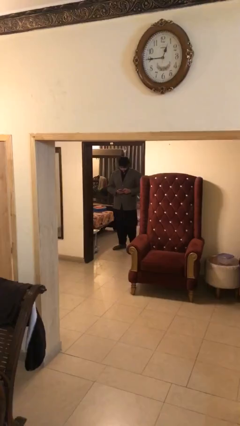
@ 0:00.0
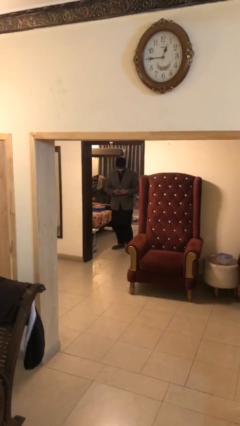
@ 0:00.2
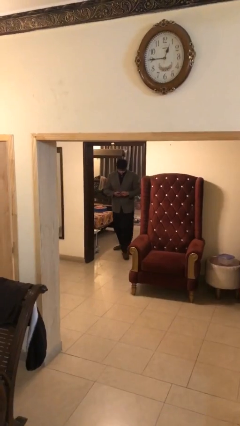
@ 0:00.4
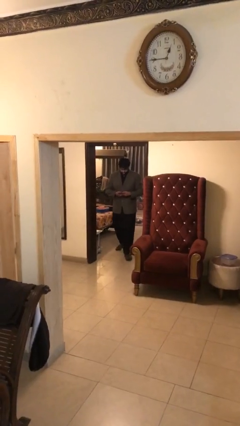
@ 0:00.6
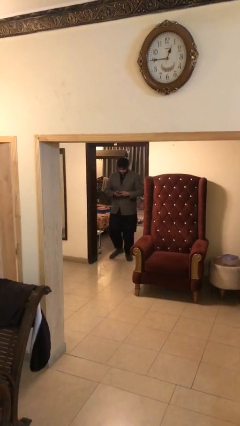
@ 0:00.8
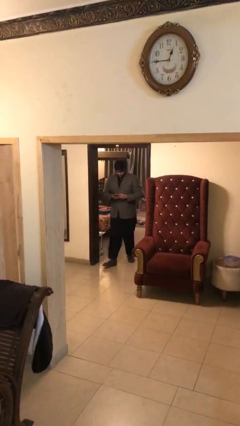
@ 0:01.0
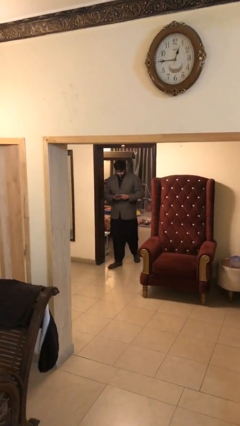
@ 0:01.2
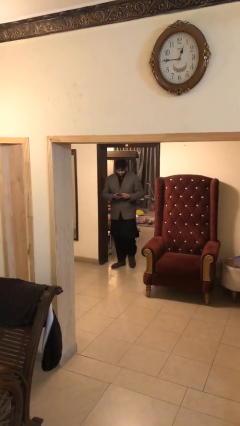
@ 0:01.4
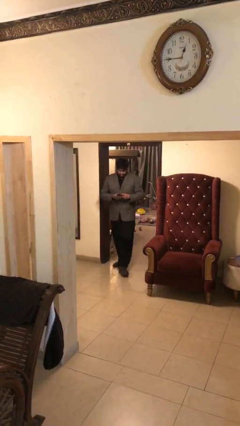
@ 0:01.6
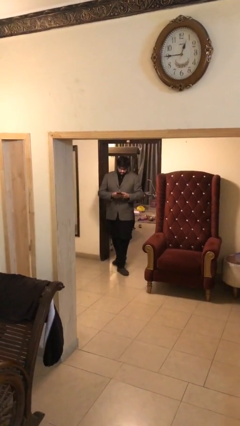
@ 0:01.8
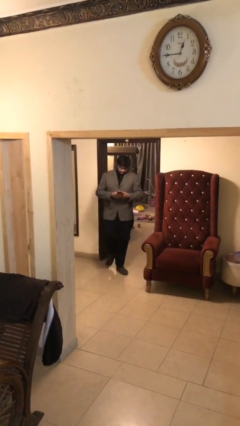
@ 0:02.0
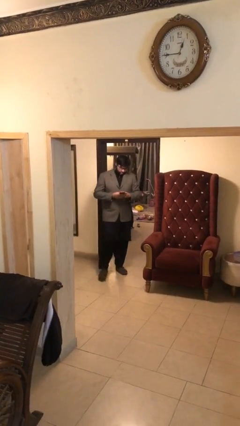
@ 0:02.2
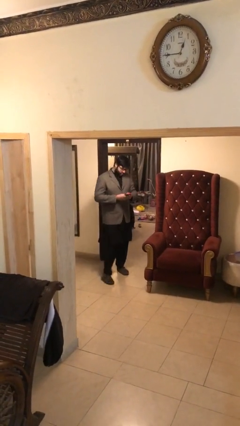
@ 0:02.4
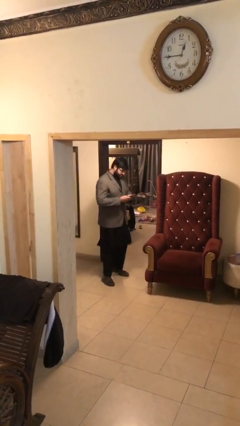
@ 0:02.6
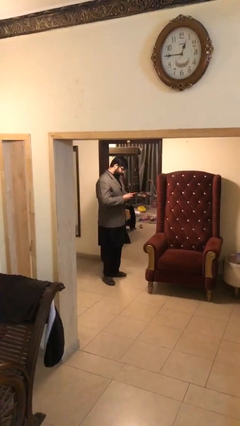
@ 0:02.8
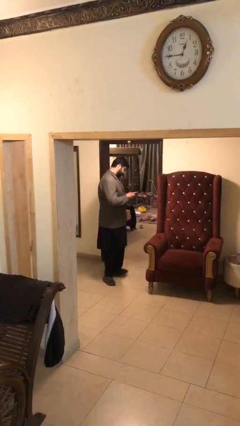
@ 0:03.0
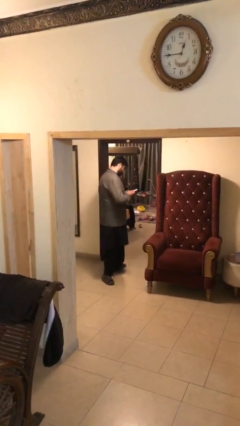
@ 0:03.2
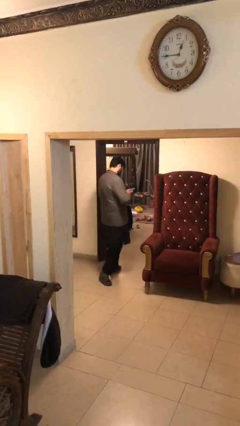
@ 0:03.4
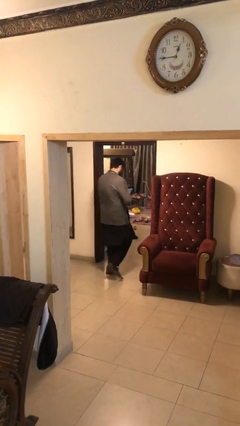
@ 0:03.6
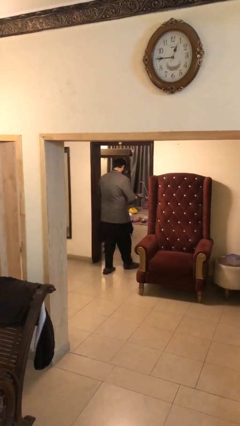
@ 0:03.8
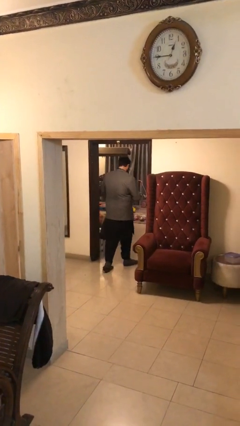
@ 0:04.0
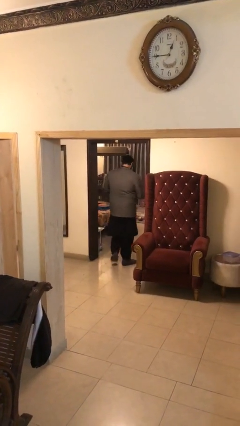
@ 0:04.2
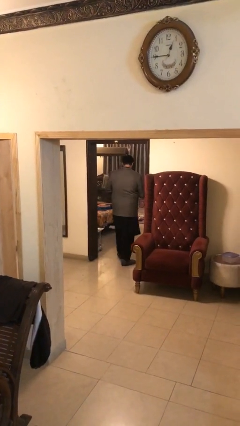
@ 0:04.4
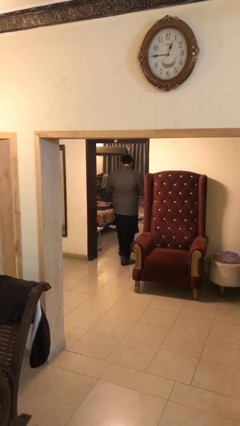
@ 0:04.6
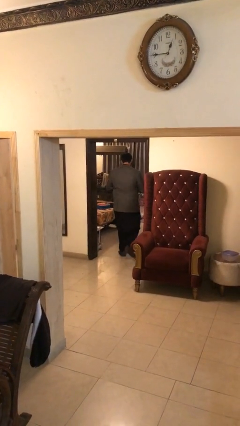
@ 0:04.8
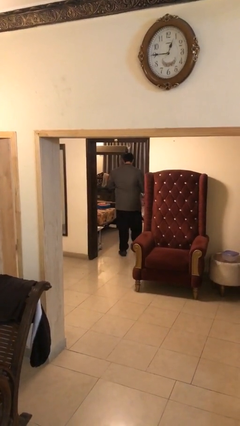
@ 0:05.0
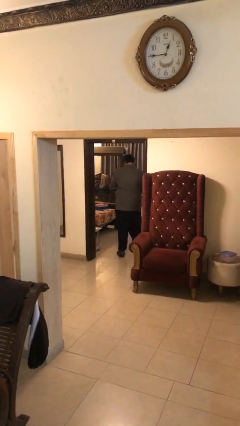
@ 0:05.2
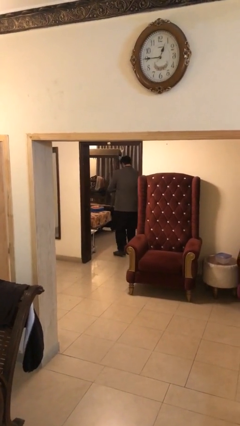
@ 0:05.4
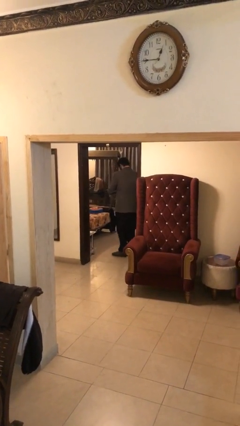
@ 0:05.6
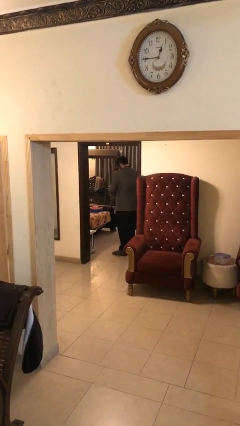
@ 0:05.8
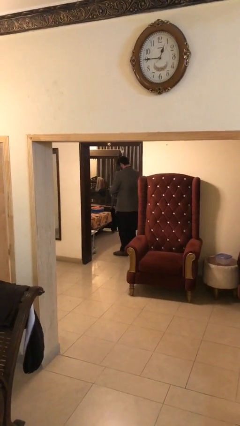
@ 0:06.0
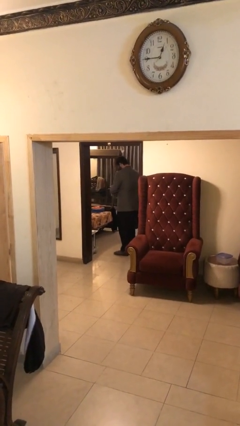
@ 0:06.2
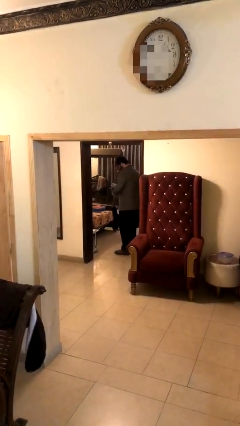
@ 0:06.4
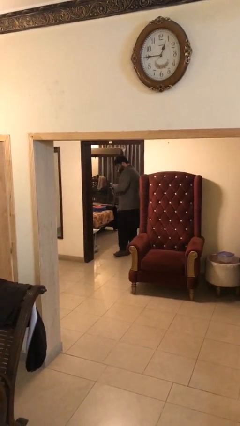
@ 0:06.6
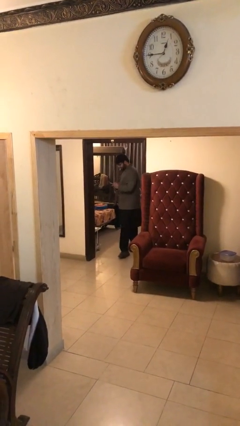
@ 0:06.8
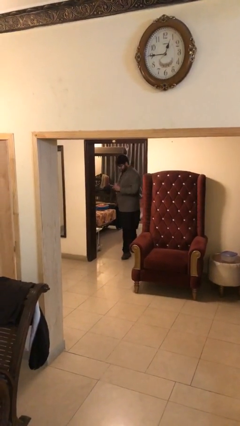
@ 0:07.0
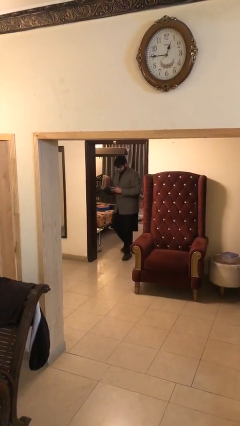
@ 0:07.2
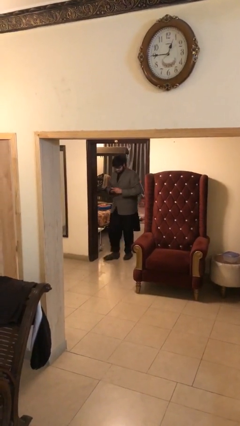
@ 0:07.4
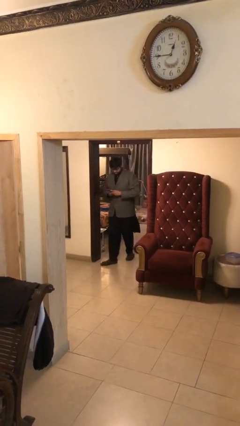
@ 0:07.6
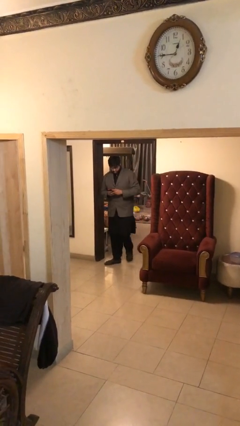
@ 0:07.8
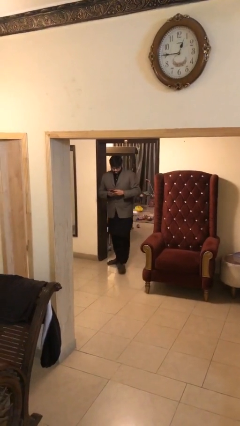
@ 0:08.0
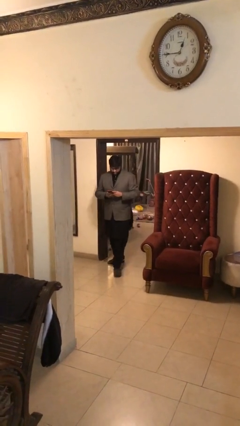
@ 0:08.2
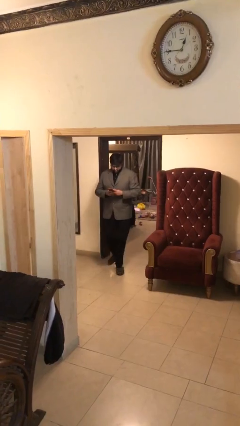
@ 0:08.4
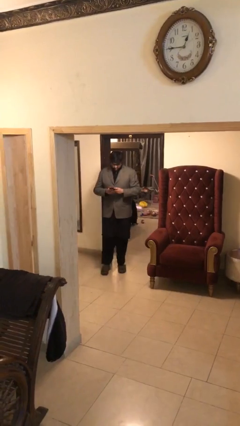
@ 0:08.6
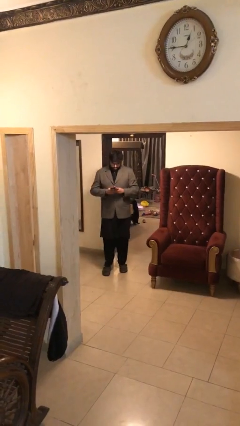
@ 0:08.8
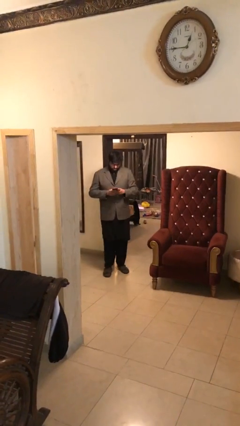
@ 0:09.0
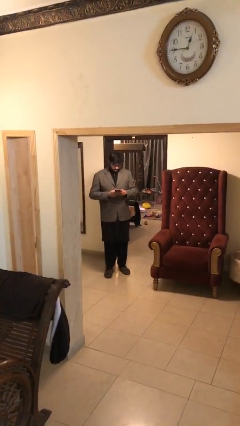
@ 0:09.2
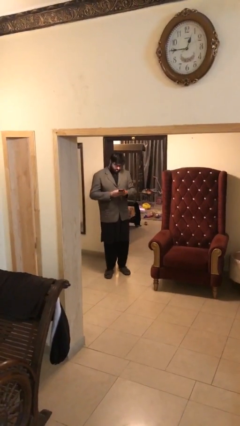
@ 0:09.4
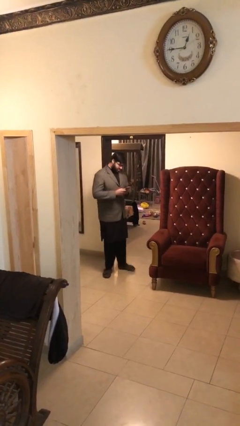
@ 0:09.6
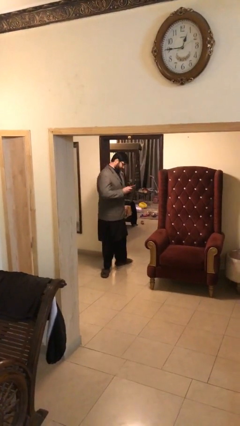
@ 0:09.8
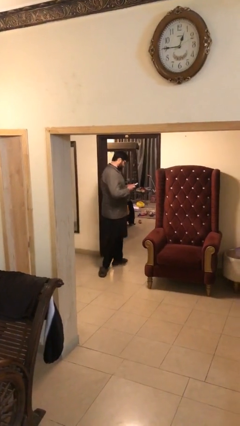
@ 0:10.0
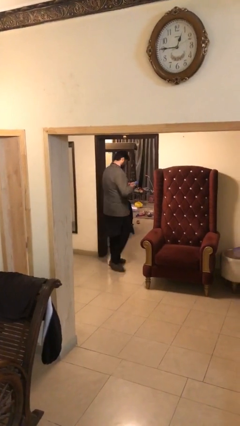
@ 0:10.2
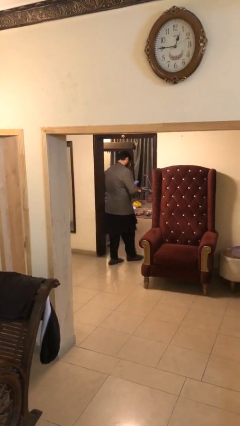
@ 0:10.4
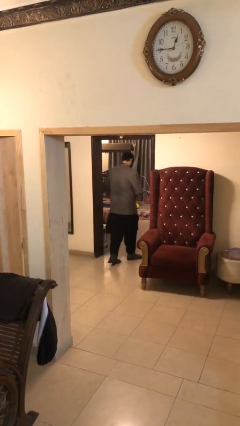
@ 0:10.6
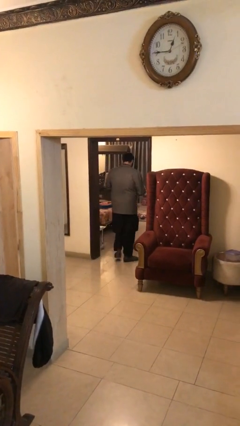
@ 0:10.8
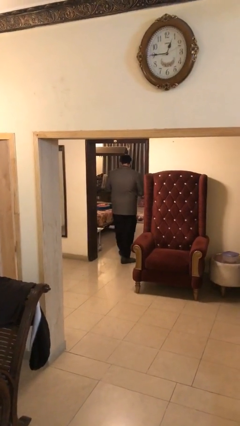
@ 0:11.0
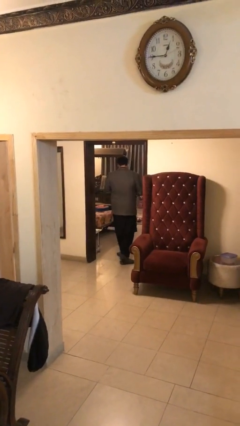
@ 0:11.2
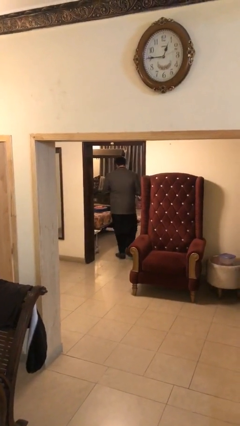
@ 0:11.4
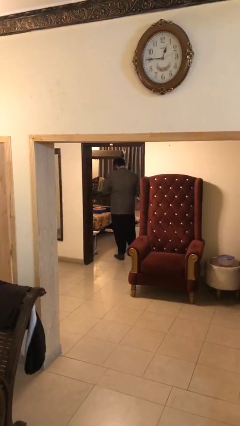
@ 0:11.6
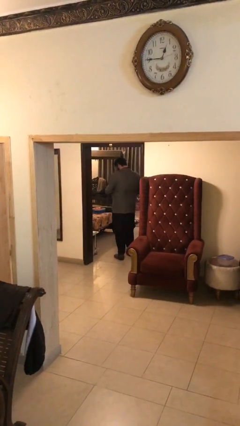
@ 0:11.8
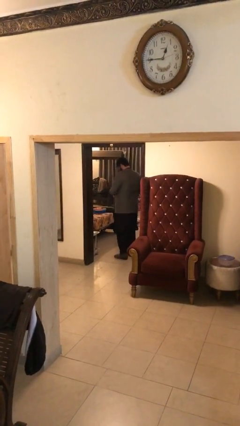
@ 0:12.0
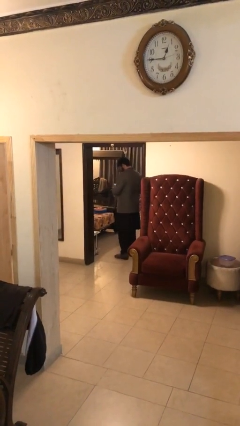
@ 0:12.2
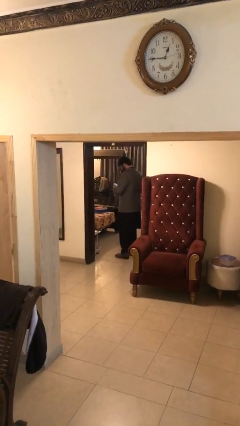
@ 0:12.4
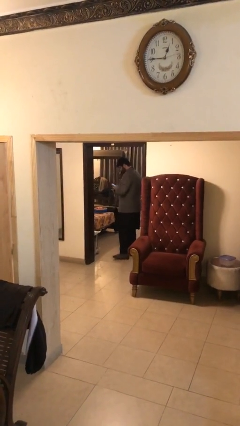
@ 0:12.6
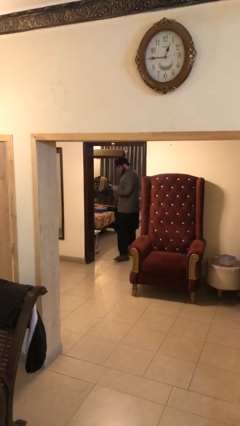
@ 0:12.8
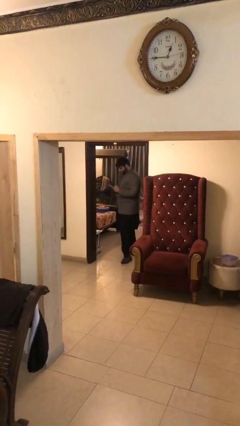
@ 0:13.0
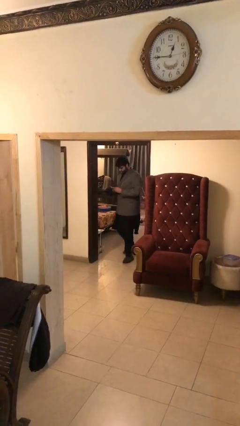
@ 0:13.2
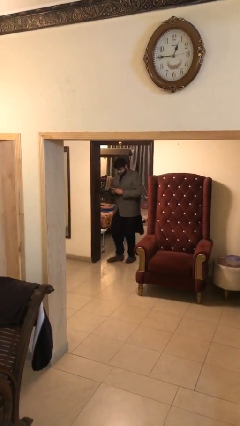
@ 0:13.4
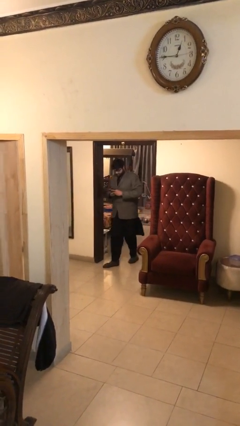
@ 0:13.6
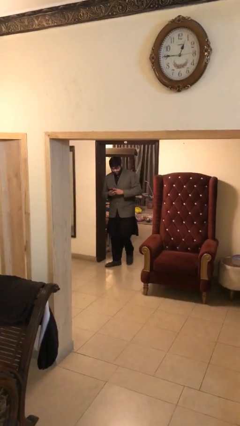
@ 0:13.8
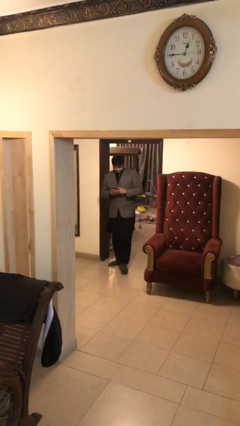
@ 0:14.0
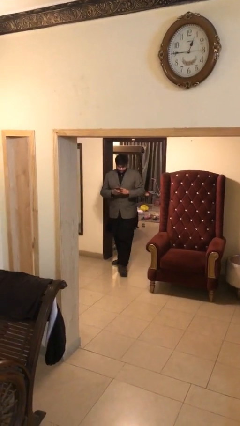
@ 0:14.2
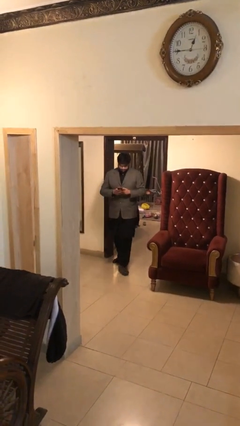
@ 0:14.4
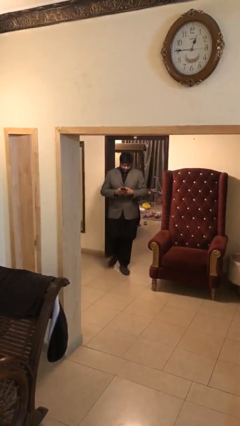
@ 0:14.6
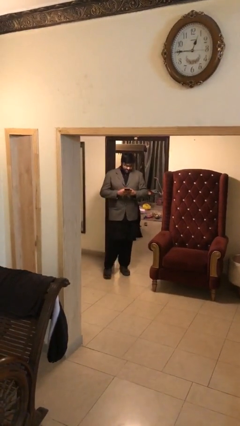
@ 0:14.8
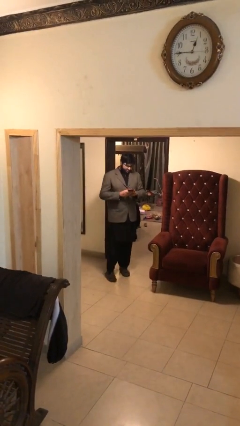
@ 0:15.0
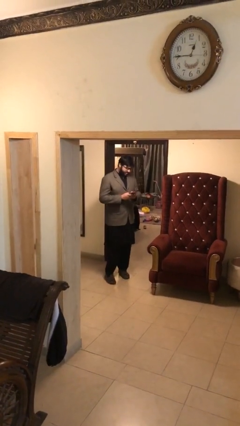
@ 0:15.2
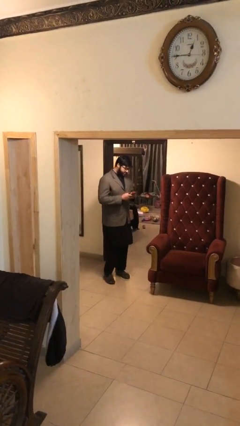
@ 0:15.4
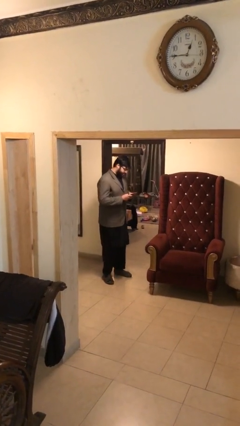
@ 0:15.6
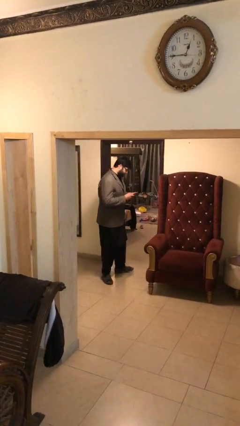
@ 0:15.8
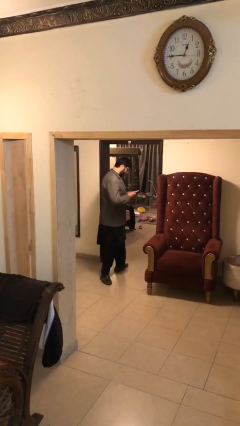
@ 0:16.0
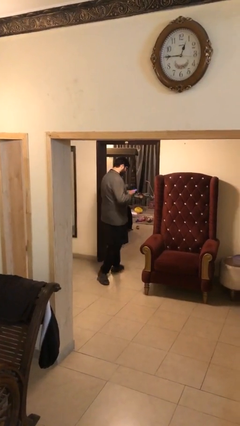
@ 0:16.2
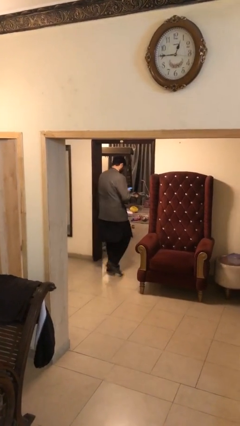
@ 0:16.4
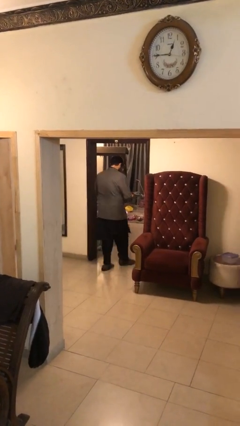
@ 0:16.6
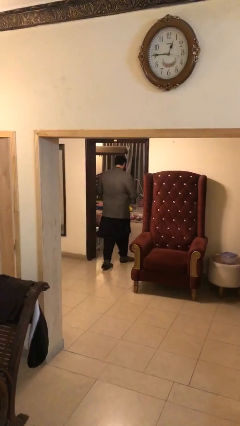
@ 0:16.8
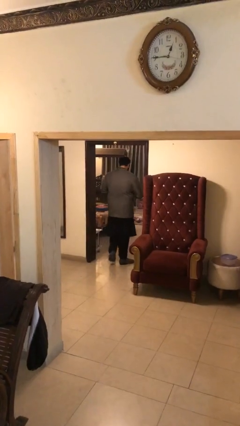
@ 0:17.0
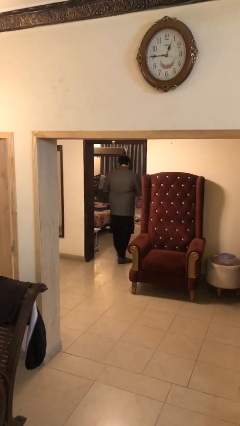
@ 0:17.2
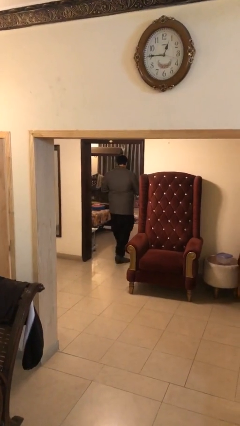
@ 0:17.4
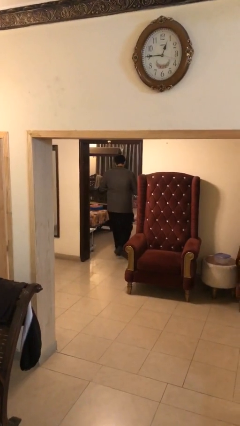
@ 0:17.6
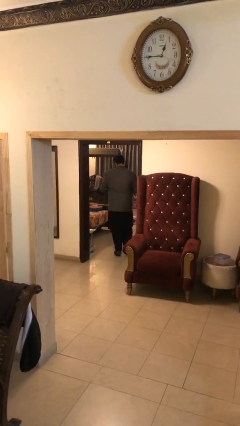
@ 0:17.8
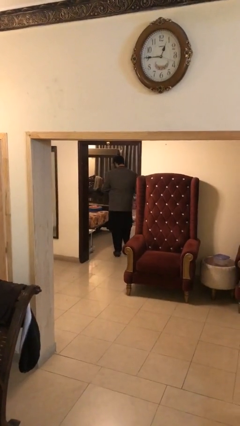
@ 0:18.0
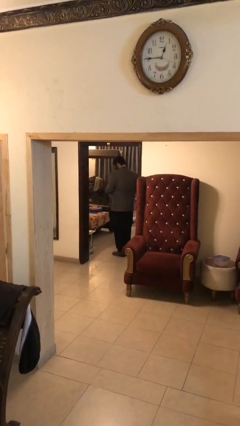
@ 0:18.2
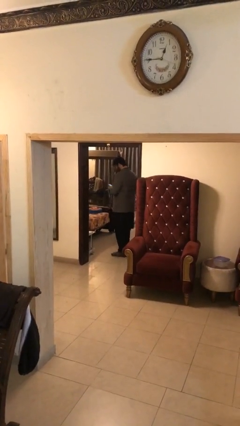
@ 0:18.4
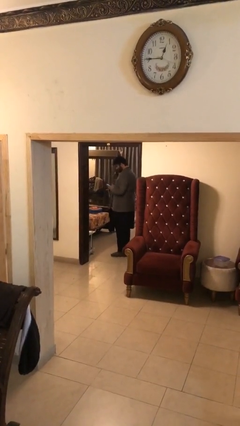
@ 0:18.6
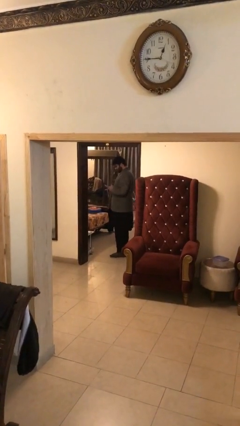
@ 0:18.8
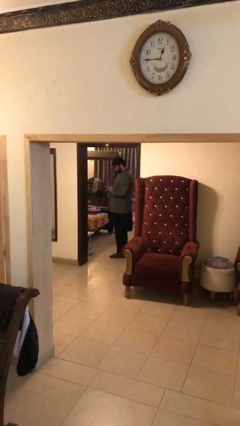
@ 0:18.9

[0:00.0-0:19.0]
person texts on phone
